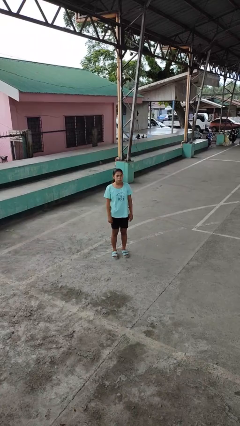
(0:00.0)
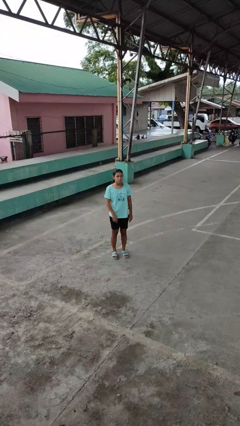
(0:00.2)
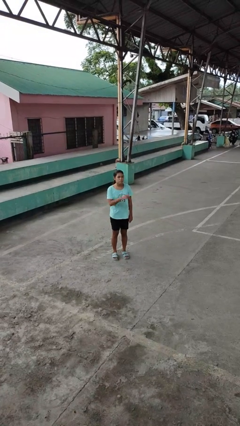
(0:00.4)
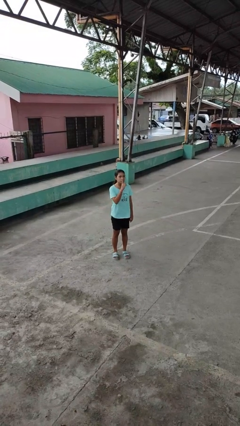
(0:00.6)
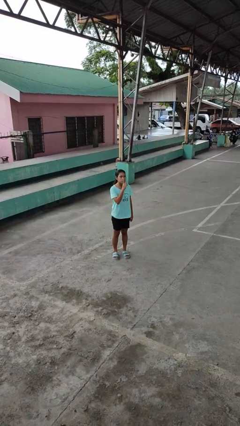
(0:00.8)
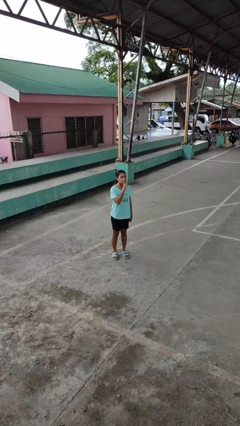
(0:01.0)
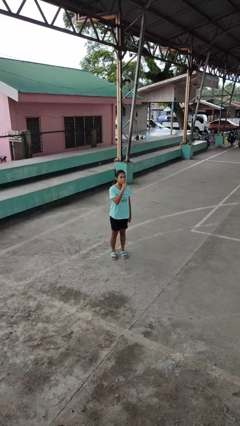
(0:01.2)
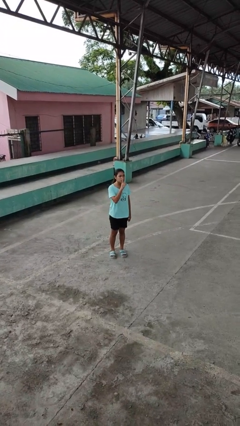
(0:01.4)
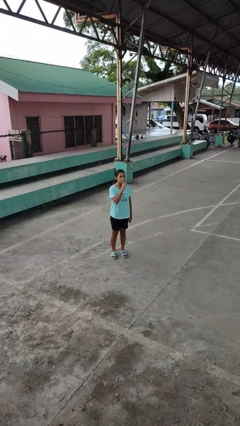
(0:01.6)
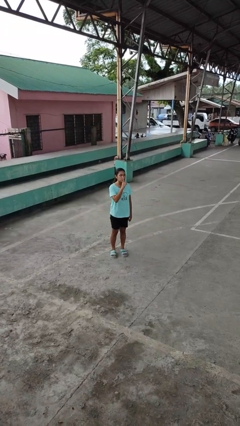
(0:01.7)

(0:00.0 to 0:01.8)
person gestures be quiet

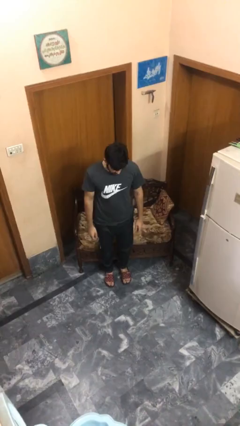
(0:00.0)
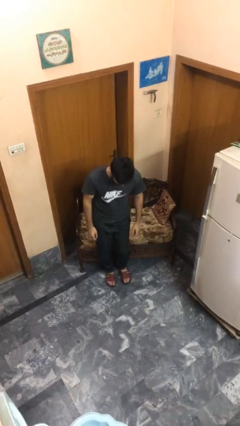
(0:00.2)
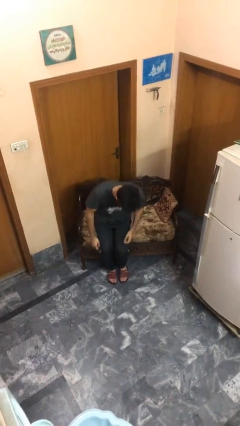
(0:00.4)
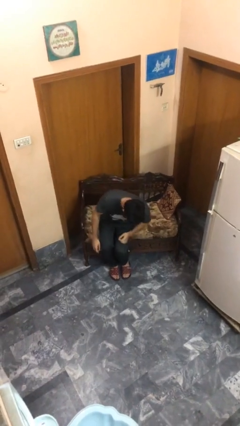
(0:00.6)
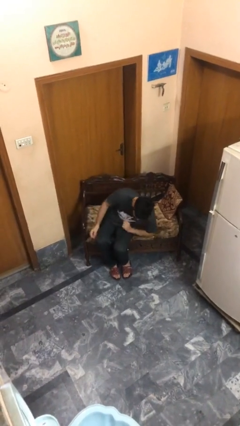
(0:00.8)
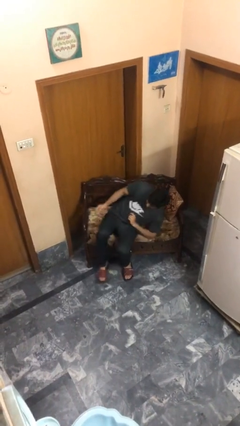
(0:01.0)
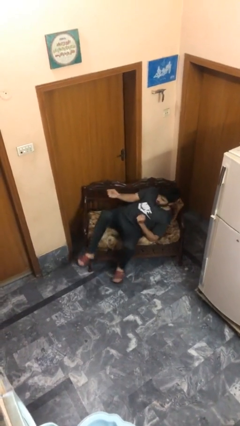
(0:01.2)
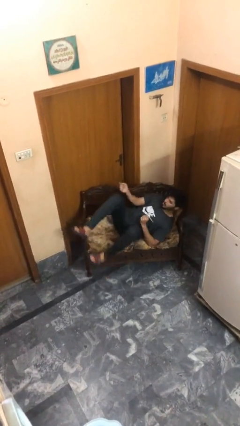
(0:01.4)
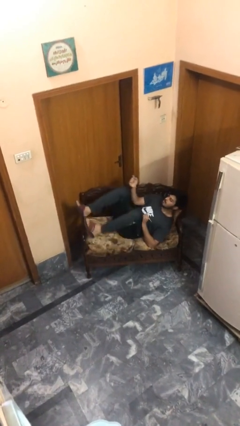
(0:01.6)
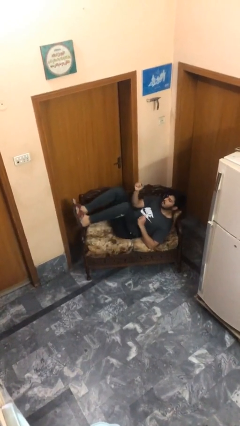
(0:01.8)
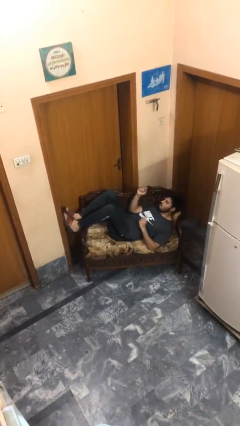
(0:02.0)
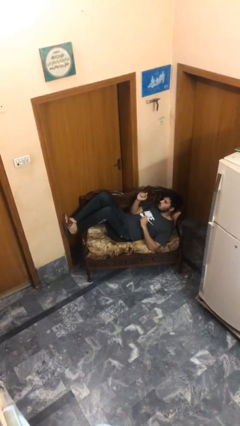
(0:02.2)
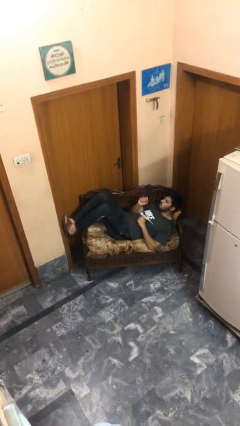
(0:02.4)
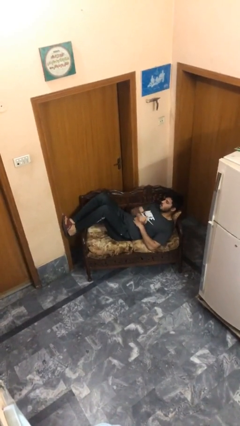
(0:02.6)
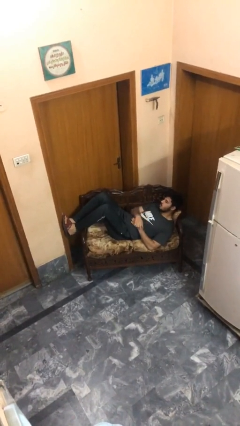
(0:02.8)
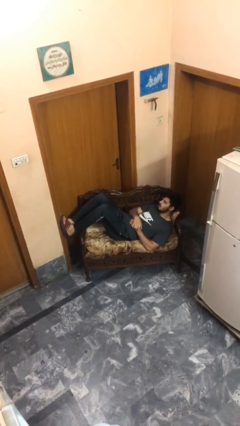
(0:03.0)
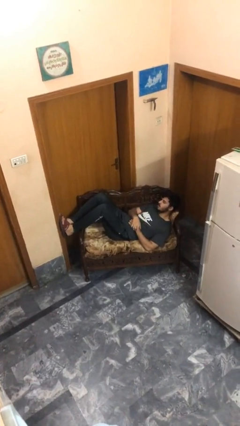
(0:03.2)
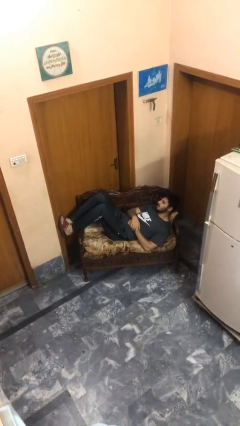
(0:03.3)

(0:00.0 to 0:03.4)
person lies down on couch

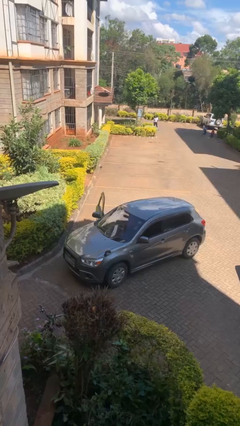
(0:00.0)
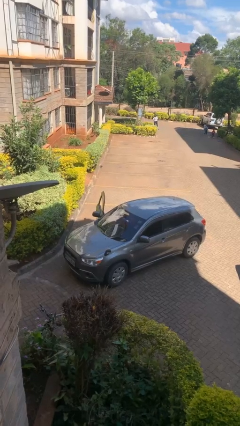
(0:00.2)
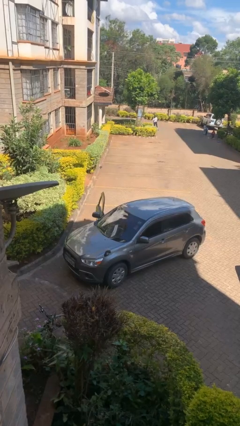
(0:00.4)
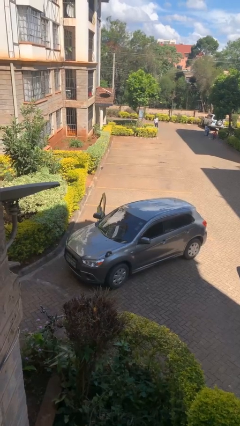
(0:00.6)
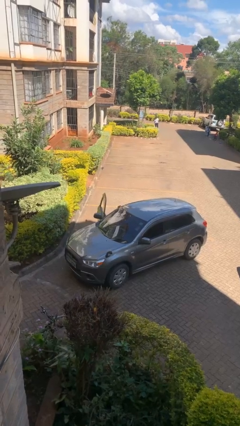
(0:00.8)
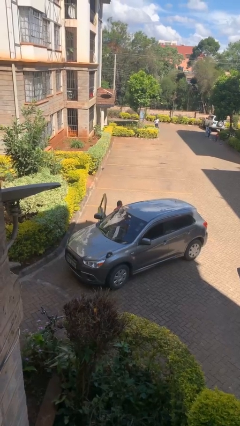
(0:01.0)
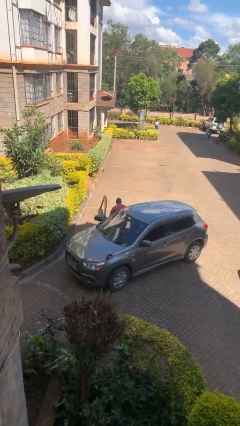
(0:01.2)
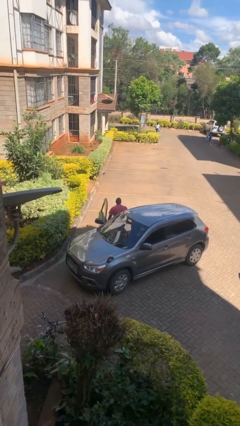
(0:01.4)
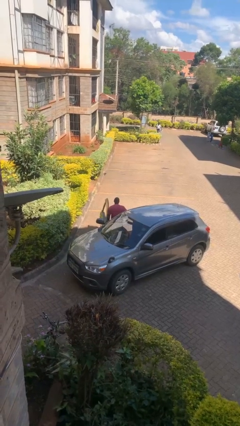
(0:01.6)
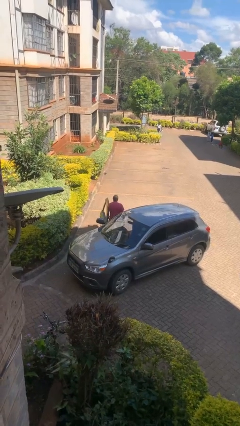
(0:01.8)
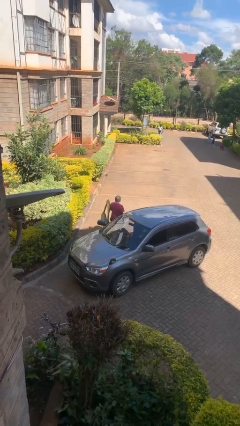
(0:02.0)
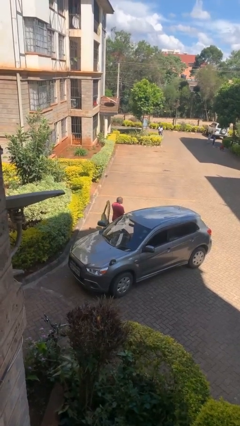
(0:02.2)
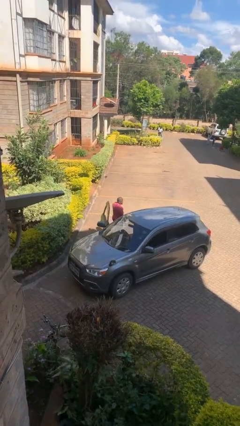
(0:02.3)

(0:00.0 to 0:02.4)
person exits car

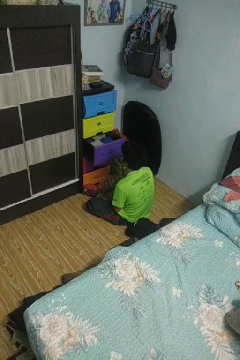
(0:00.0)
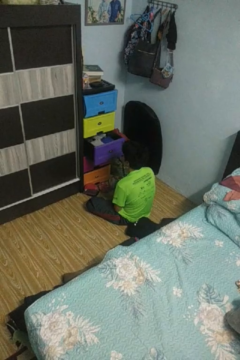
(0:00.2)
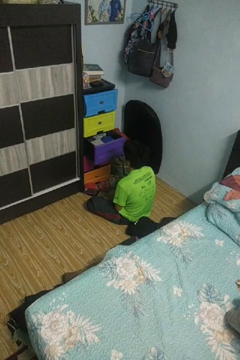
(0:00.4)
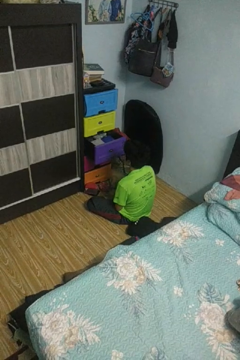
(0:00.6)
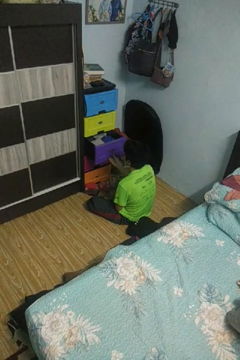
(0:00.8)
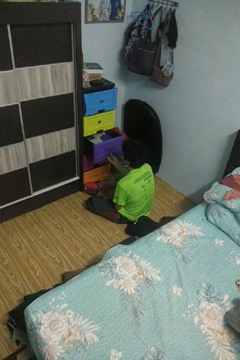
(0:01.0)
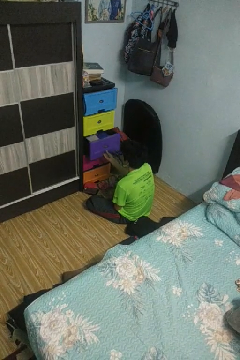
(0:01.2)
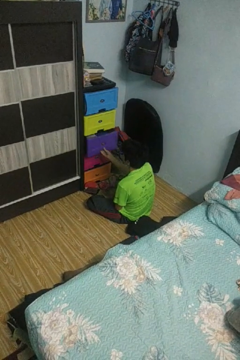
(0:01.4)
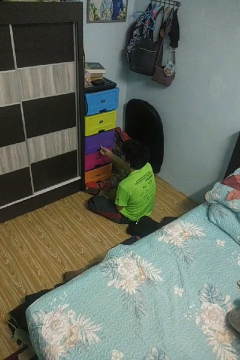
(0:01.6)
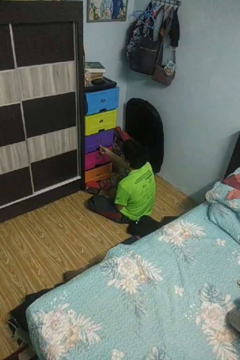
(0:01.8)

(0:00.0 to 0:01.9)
person closes dresser drawer

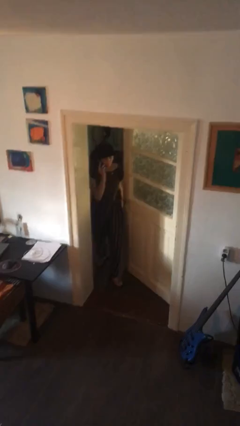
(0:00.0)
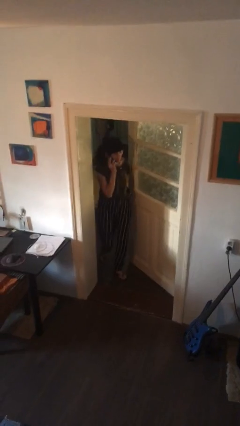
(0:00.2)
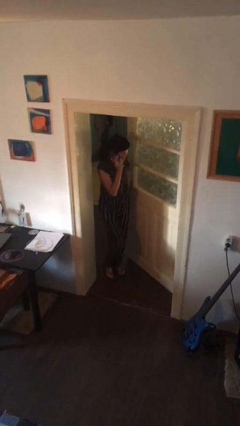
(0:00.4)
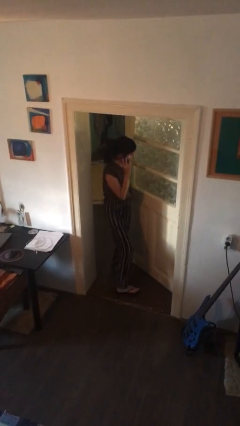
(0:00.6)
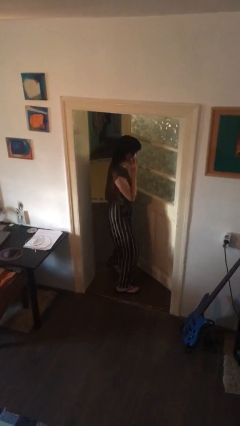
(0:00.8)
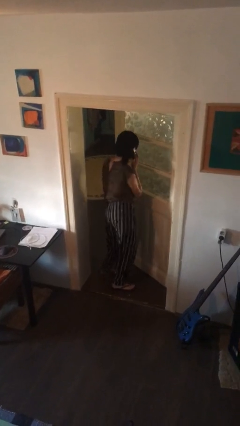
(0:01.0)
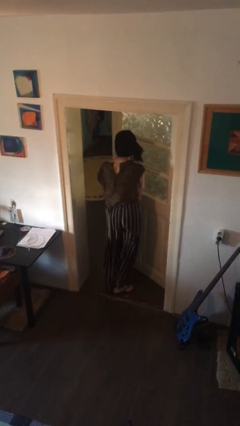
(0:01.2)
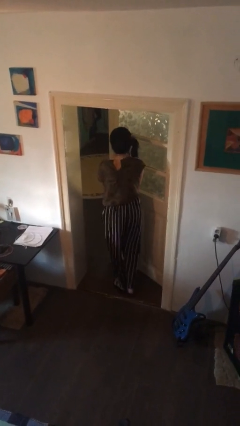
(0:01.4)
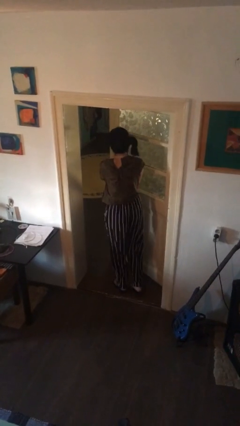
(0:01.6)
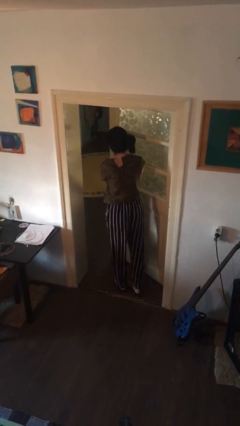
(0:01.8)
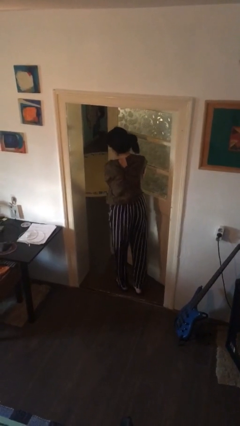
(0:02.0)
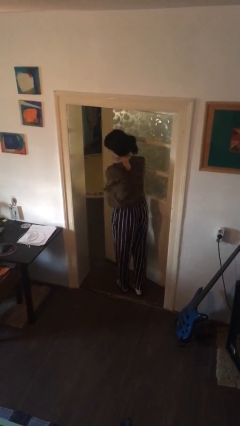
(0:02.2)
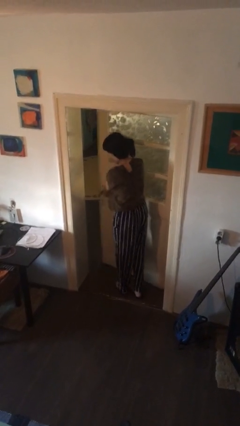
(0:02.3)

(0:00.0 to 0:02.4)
person enters scene through structure

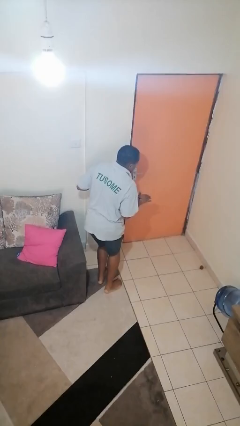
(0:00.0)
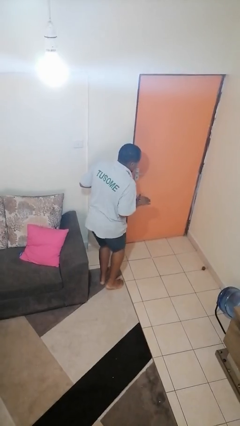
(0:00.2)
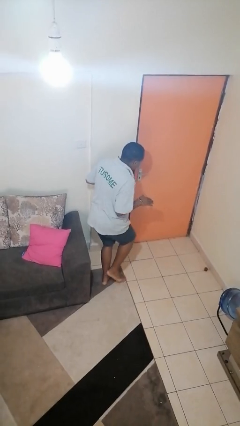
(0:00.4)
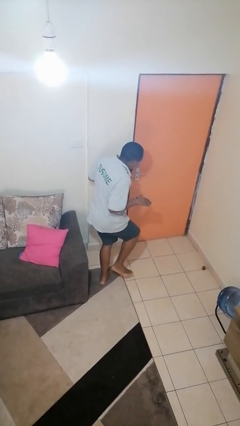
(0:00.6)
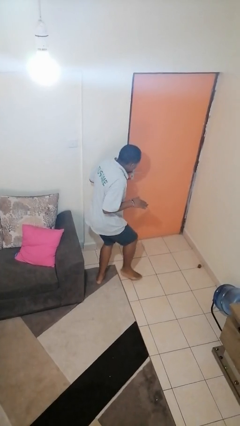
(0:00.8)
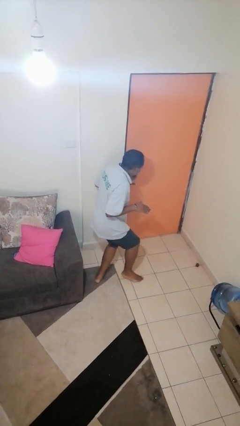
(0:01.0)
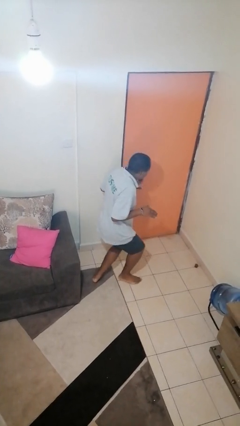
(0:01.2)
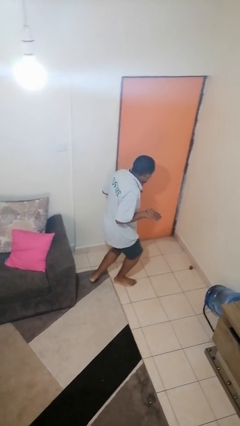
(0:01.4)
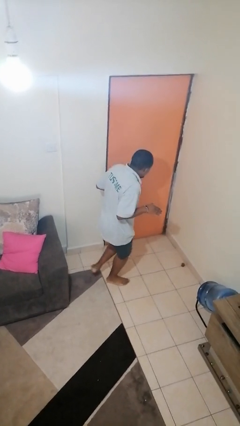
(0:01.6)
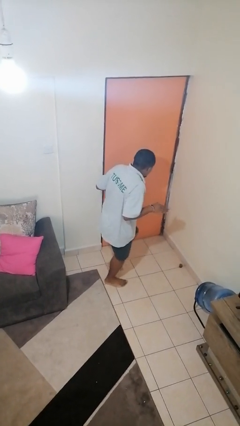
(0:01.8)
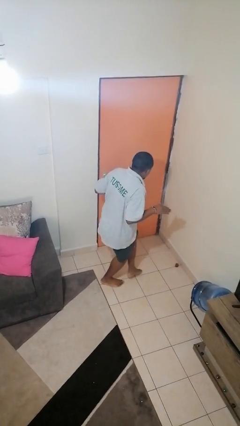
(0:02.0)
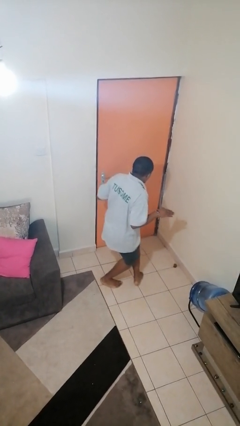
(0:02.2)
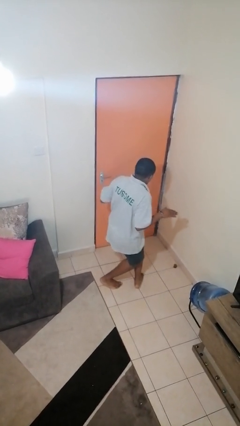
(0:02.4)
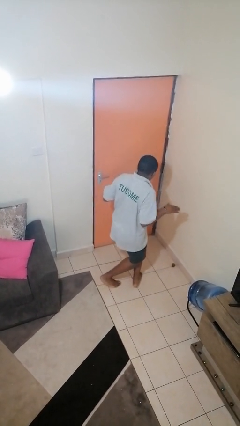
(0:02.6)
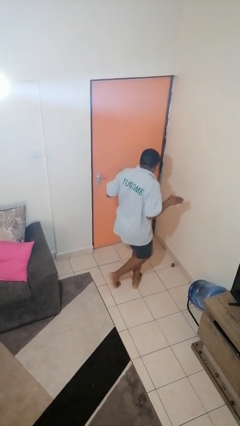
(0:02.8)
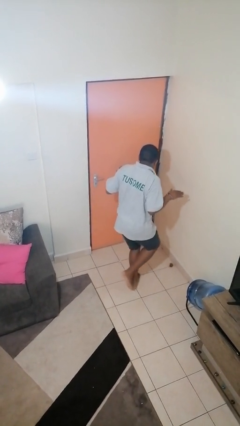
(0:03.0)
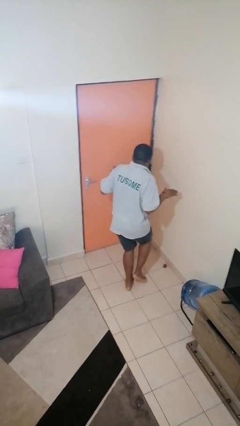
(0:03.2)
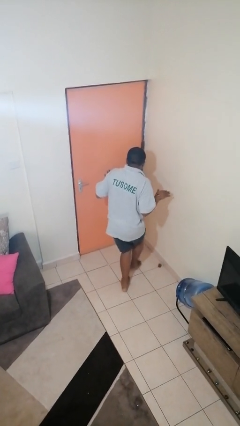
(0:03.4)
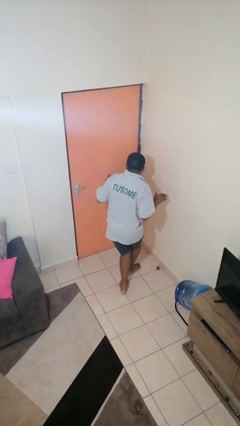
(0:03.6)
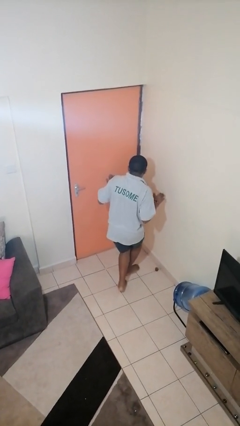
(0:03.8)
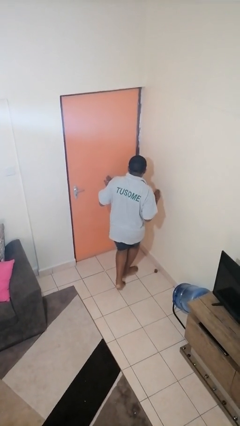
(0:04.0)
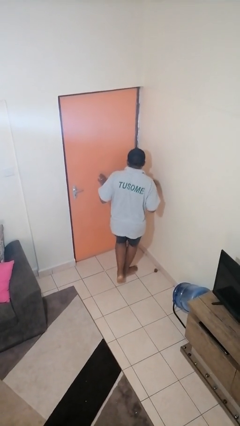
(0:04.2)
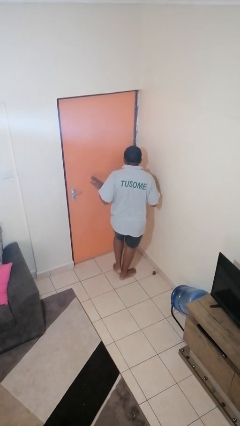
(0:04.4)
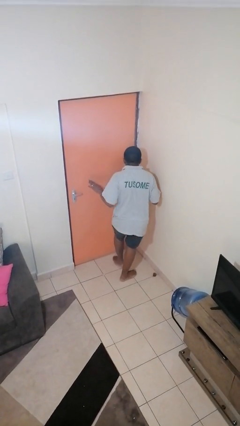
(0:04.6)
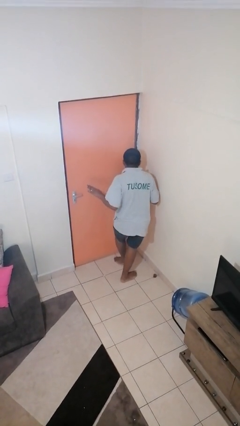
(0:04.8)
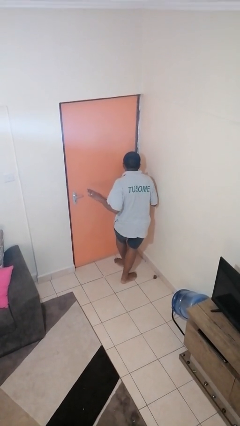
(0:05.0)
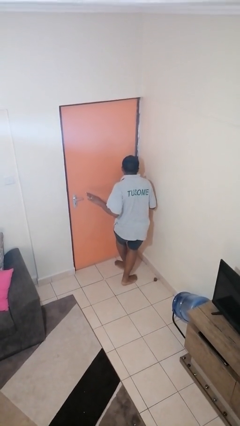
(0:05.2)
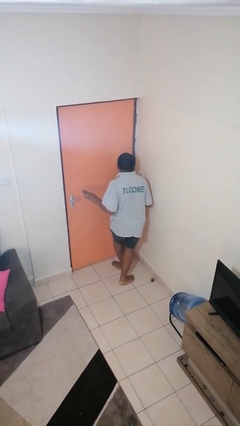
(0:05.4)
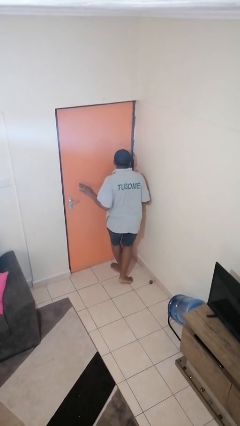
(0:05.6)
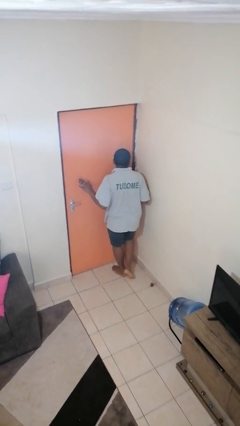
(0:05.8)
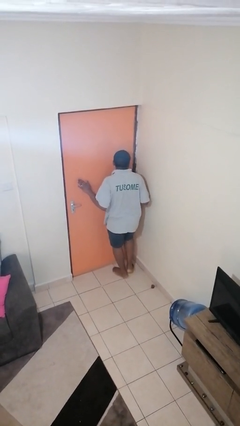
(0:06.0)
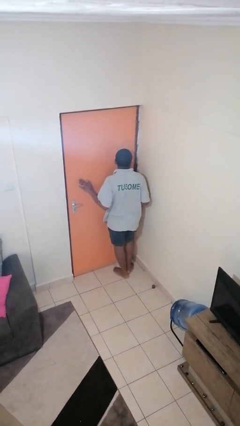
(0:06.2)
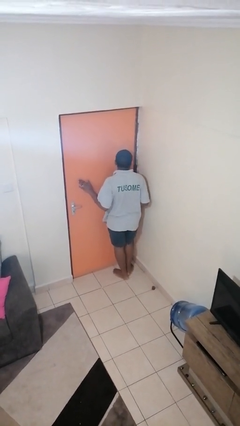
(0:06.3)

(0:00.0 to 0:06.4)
person walks tiptoe
